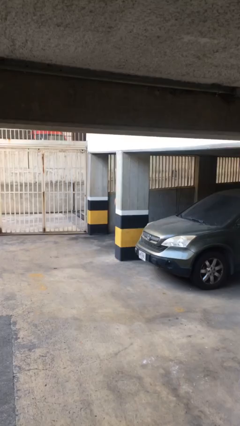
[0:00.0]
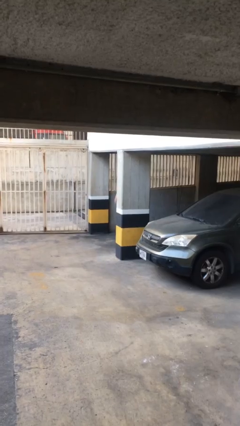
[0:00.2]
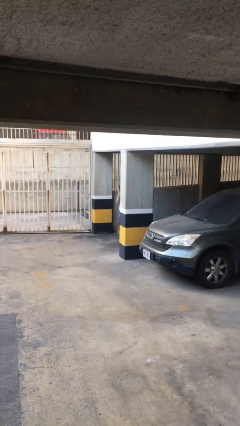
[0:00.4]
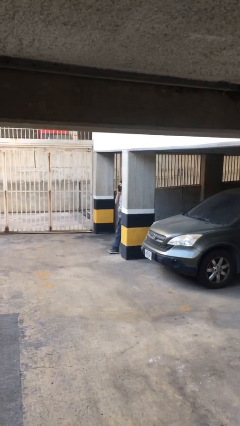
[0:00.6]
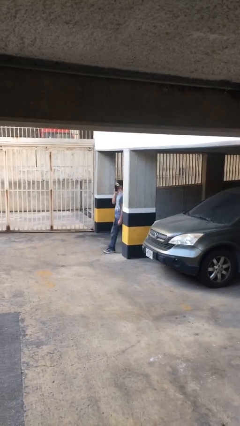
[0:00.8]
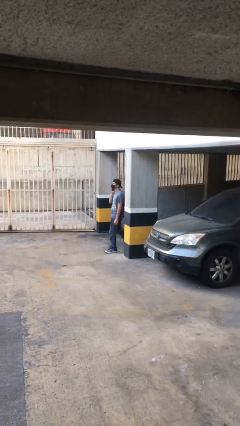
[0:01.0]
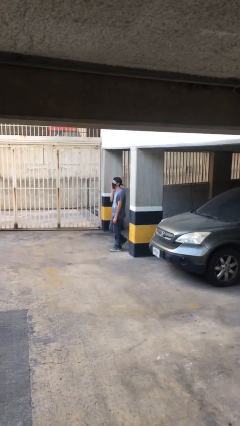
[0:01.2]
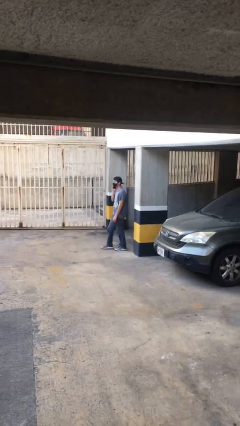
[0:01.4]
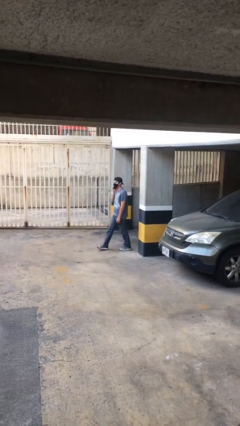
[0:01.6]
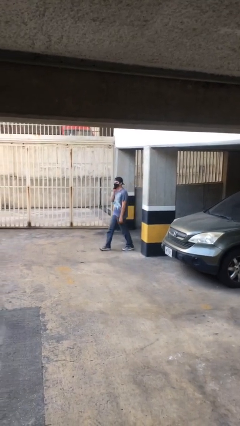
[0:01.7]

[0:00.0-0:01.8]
person enters scene through structure

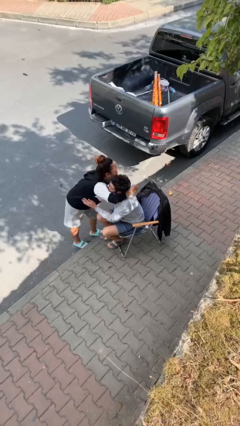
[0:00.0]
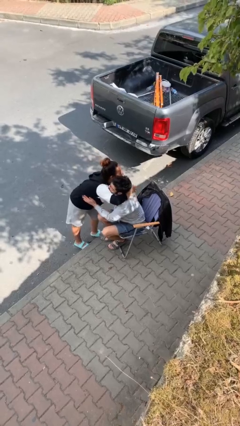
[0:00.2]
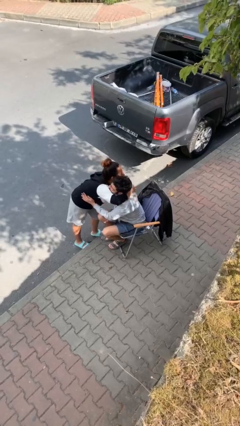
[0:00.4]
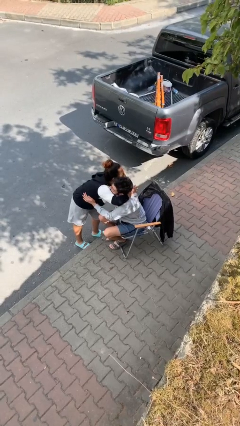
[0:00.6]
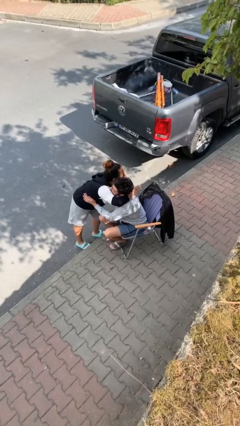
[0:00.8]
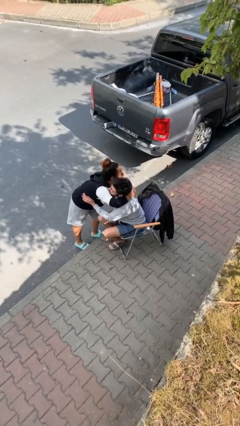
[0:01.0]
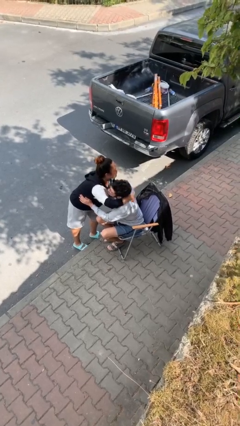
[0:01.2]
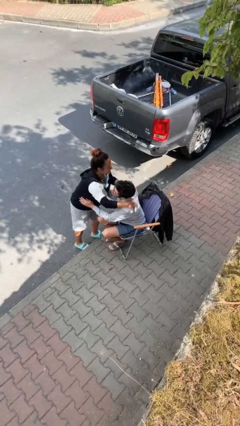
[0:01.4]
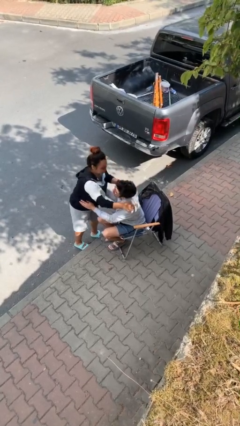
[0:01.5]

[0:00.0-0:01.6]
person embraces person

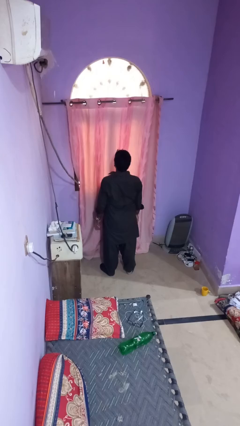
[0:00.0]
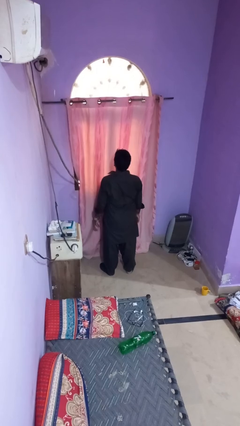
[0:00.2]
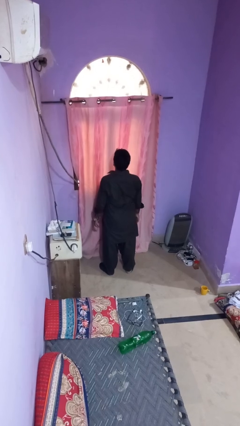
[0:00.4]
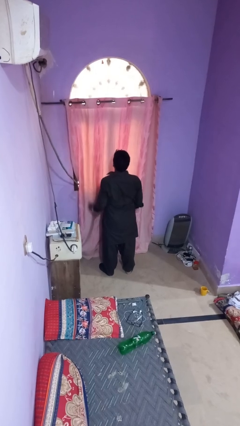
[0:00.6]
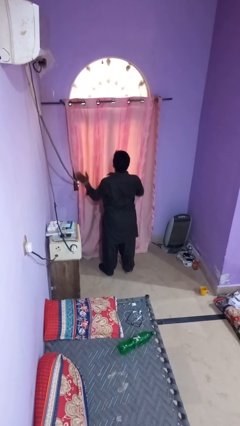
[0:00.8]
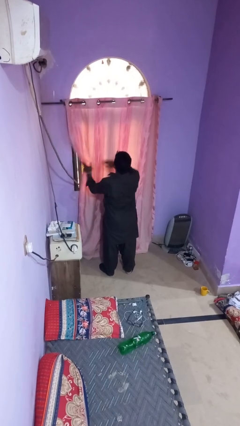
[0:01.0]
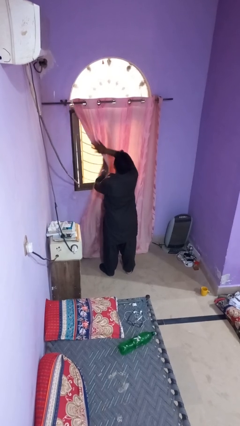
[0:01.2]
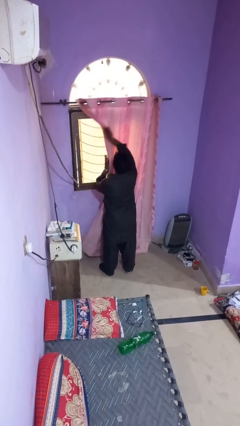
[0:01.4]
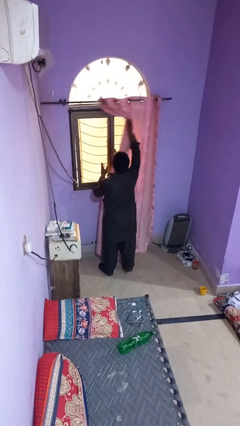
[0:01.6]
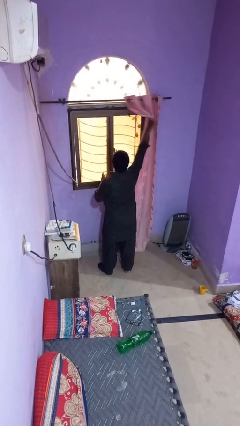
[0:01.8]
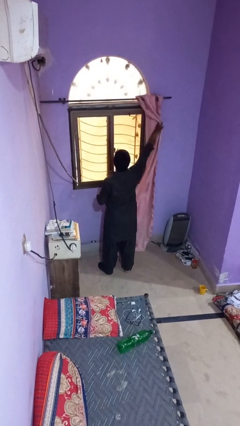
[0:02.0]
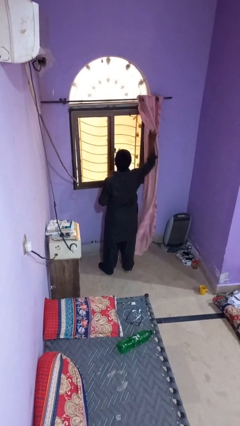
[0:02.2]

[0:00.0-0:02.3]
person opens curtains

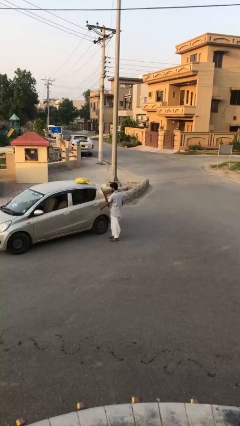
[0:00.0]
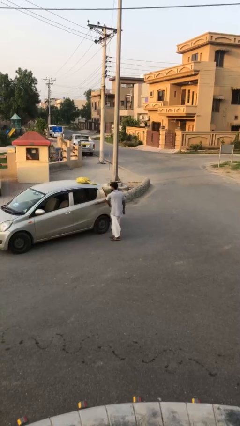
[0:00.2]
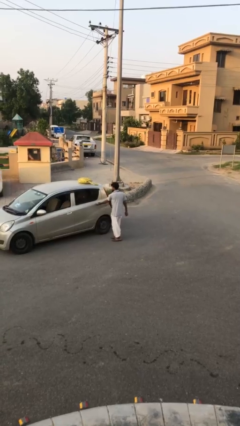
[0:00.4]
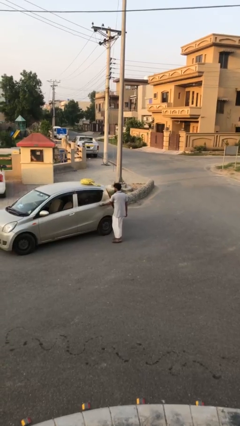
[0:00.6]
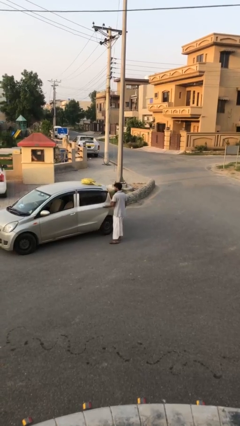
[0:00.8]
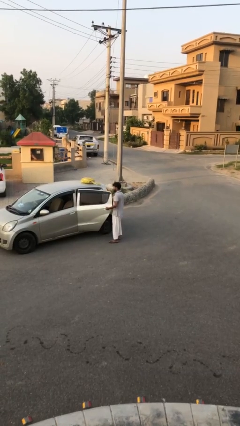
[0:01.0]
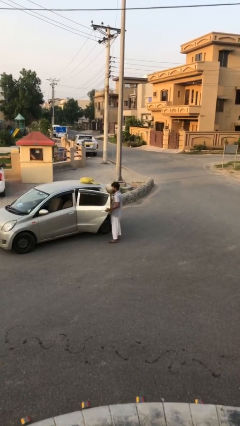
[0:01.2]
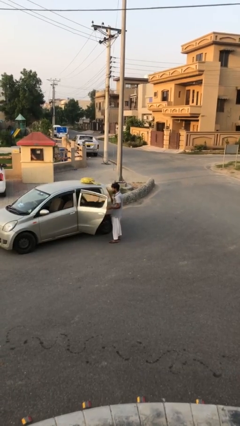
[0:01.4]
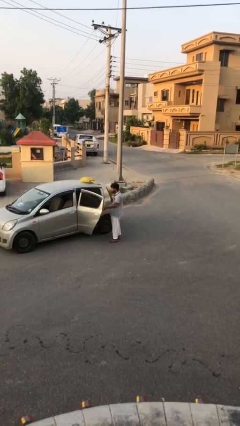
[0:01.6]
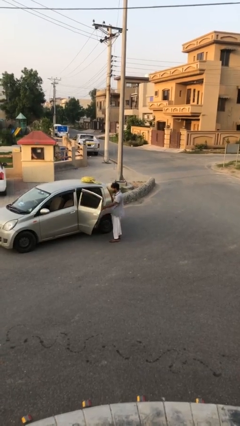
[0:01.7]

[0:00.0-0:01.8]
person opens car door

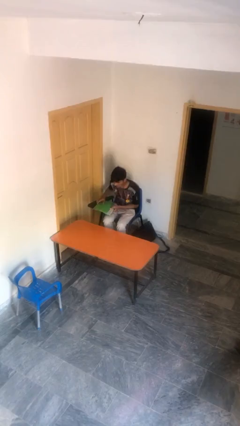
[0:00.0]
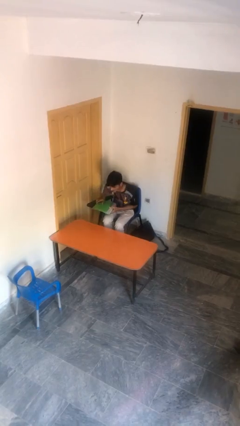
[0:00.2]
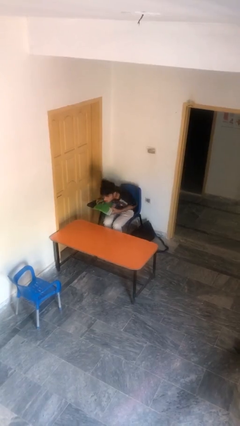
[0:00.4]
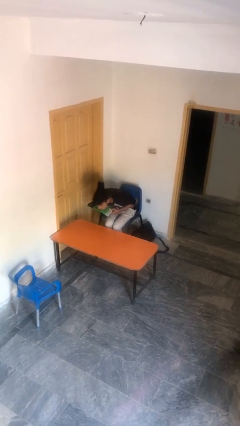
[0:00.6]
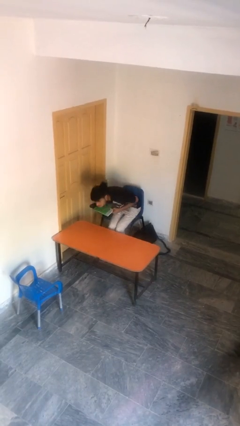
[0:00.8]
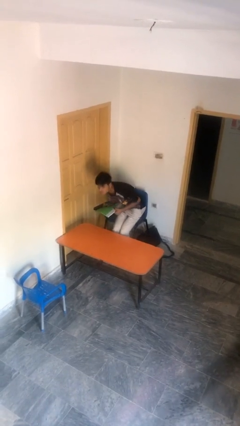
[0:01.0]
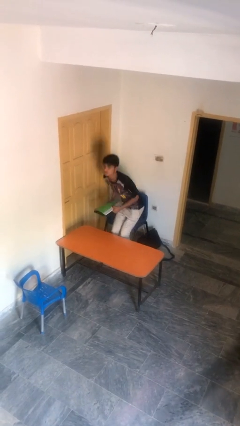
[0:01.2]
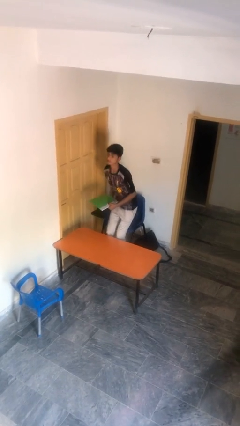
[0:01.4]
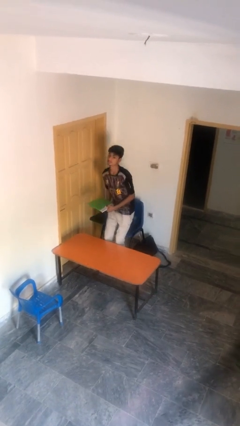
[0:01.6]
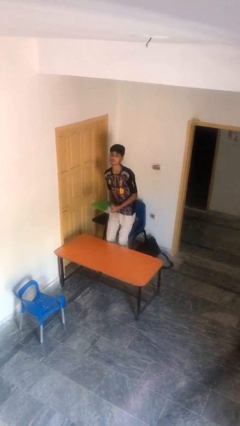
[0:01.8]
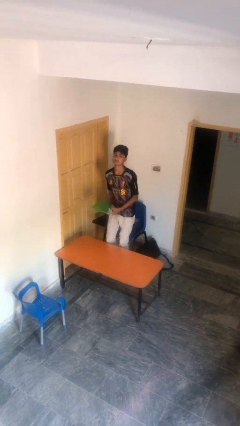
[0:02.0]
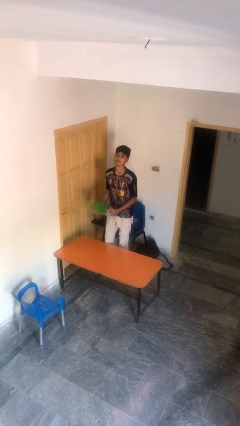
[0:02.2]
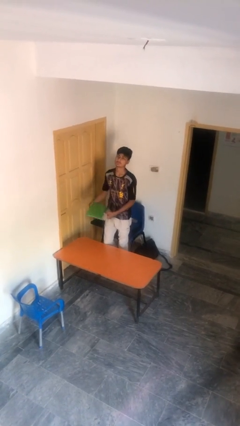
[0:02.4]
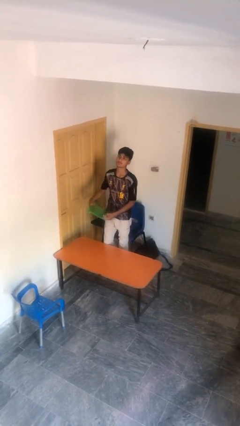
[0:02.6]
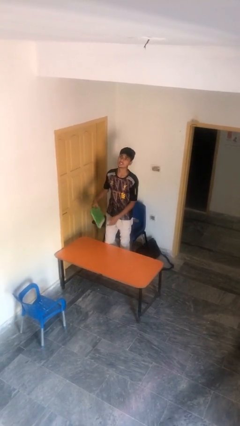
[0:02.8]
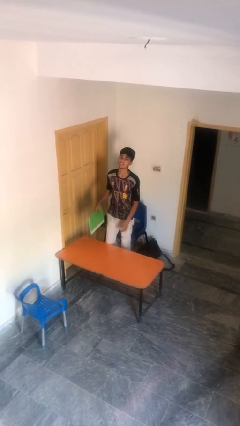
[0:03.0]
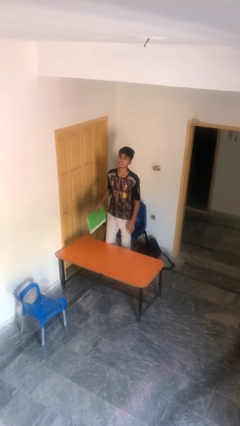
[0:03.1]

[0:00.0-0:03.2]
person stands up

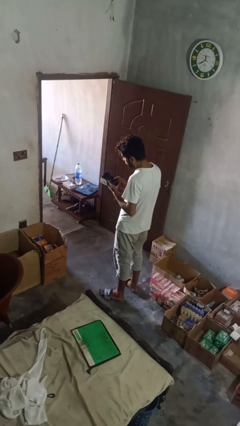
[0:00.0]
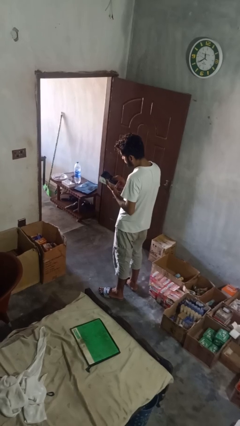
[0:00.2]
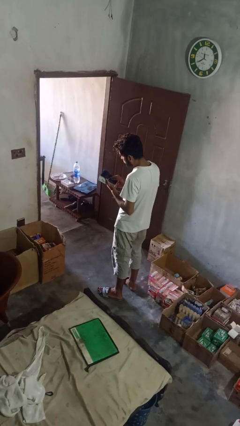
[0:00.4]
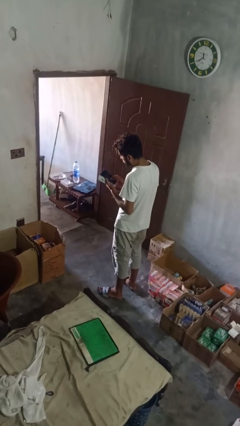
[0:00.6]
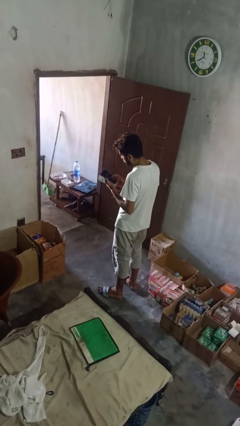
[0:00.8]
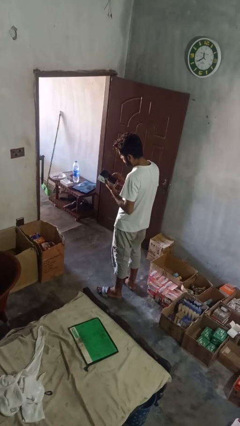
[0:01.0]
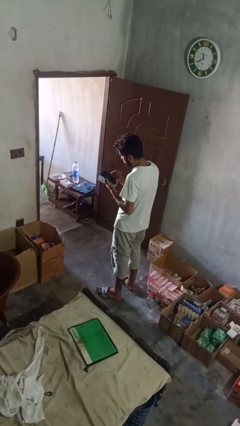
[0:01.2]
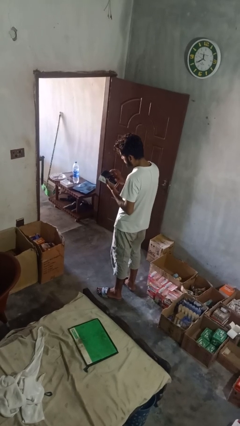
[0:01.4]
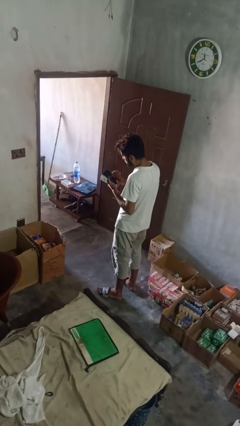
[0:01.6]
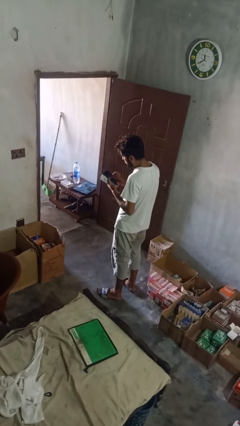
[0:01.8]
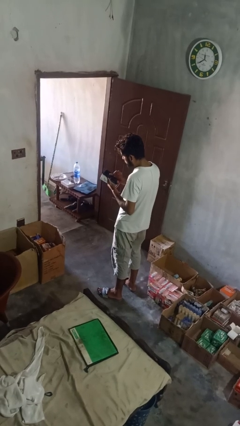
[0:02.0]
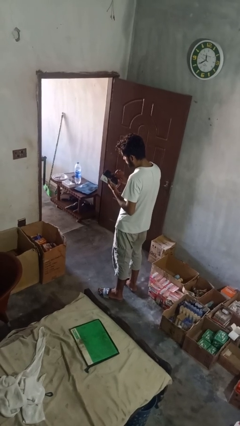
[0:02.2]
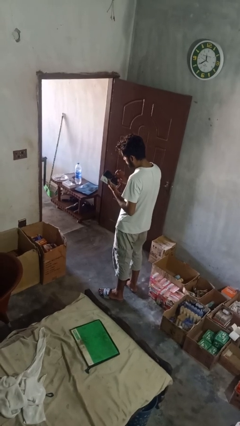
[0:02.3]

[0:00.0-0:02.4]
person interacts with tablet

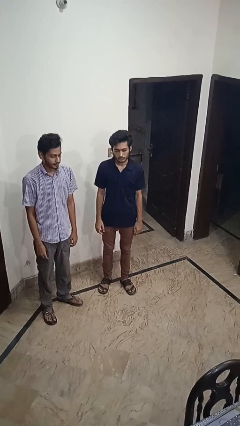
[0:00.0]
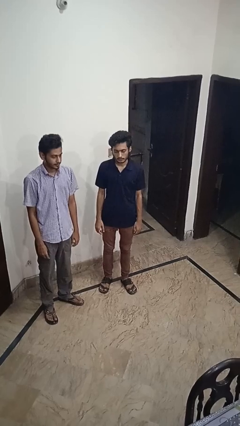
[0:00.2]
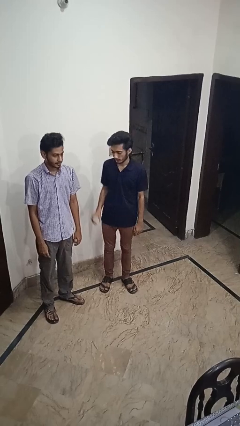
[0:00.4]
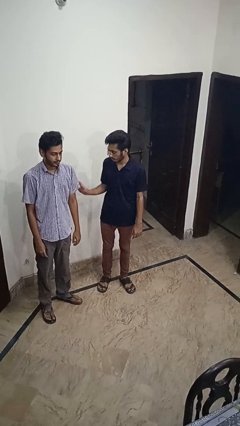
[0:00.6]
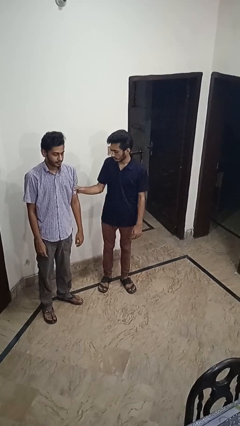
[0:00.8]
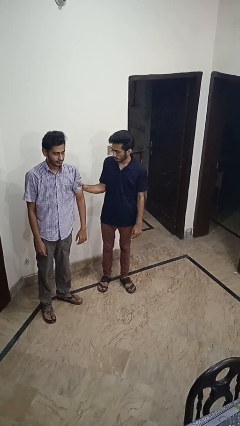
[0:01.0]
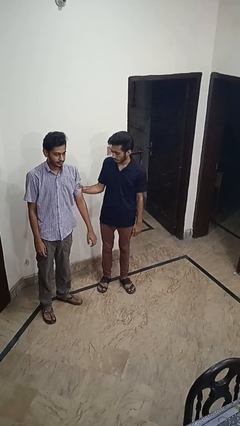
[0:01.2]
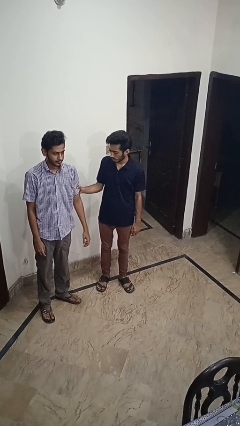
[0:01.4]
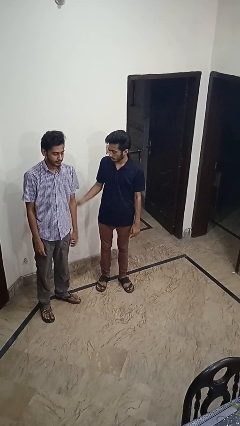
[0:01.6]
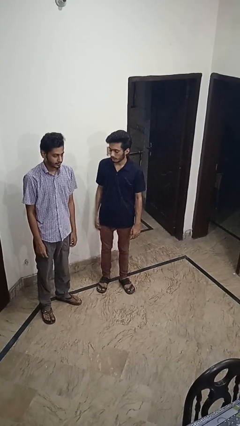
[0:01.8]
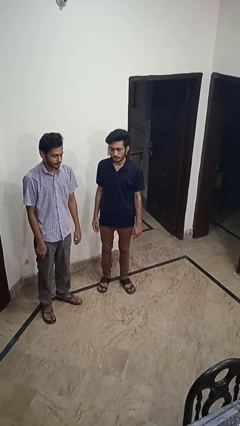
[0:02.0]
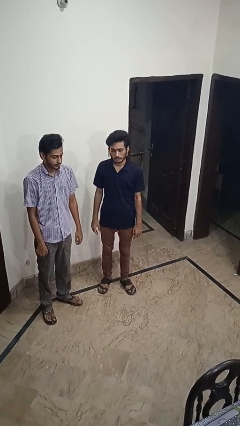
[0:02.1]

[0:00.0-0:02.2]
person grabs person by bicep

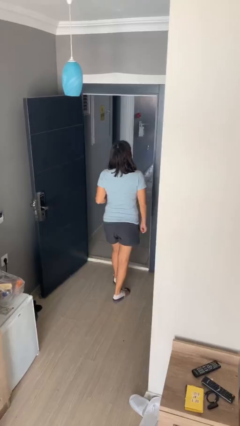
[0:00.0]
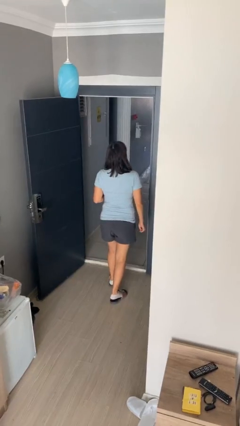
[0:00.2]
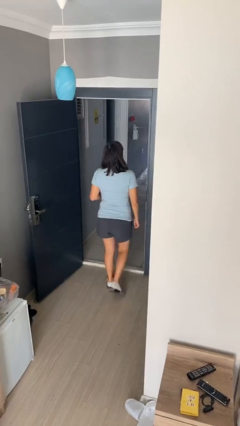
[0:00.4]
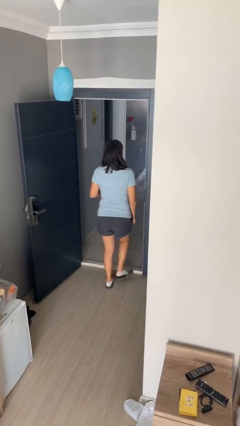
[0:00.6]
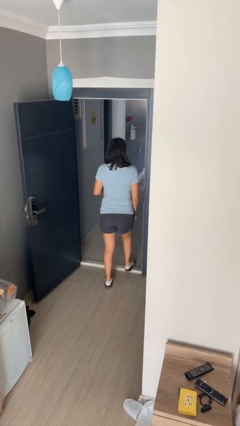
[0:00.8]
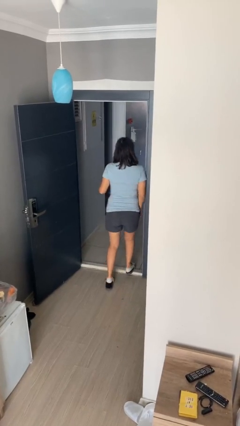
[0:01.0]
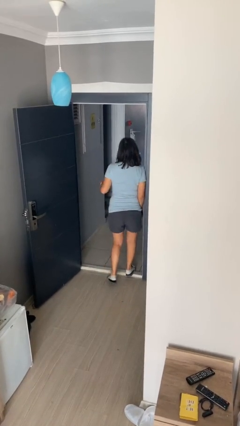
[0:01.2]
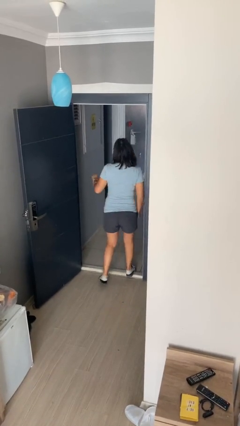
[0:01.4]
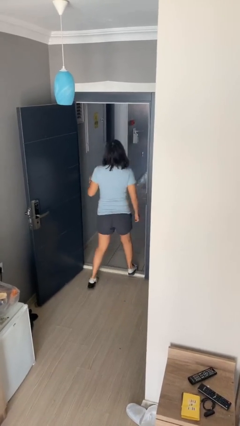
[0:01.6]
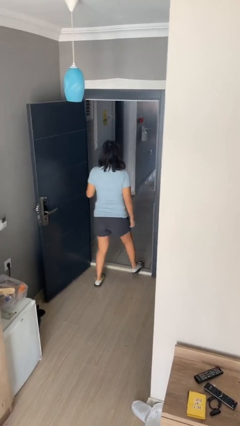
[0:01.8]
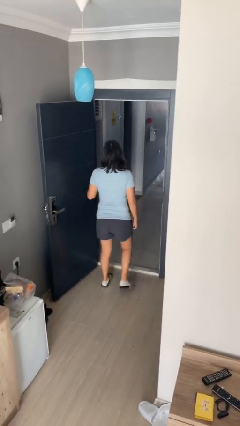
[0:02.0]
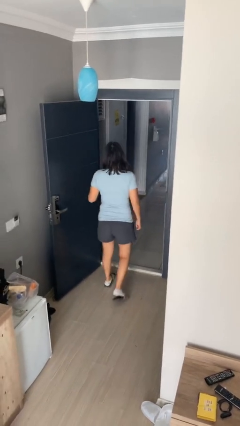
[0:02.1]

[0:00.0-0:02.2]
person bumps into wall
